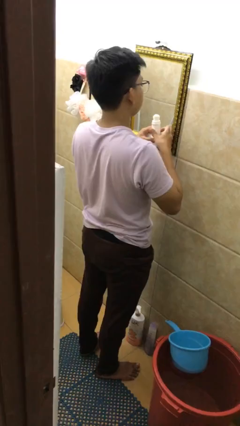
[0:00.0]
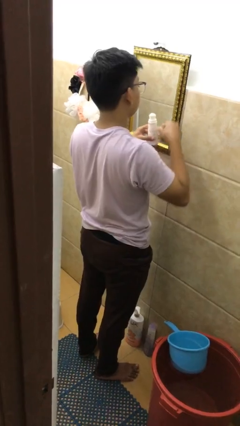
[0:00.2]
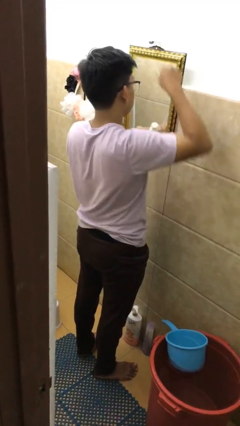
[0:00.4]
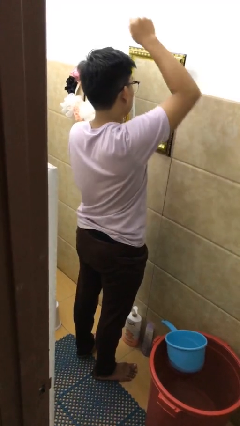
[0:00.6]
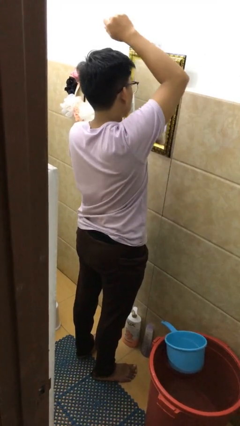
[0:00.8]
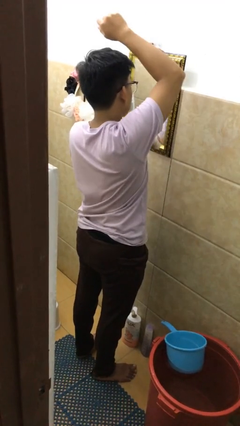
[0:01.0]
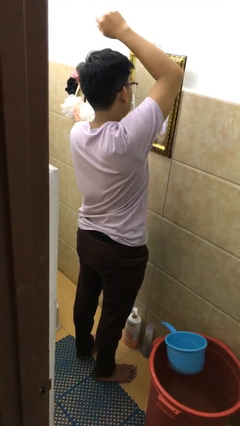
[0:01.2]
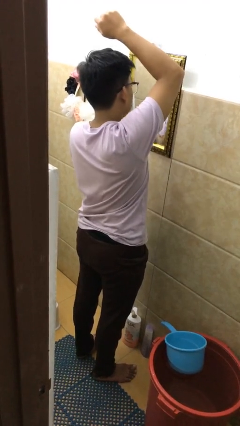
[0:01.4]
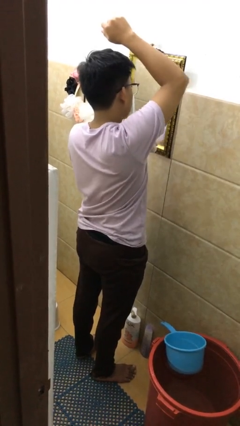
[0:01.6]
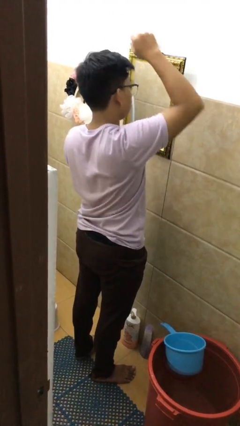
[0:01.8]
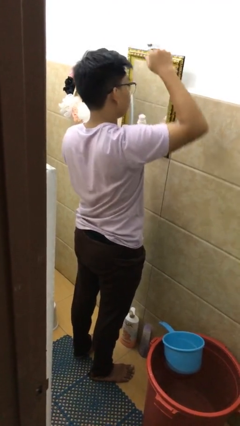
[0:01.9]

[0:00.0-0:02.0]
person applies deodorant

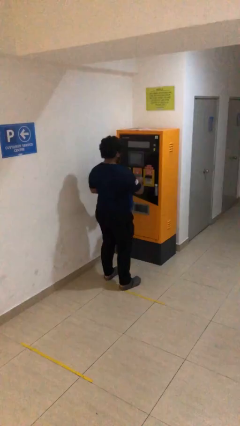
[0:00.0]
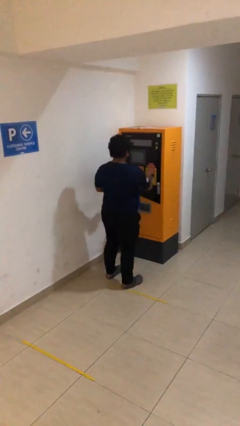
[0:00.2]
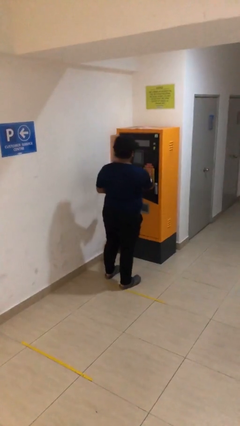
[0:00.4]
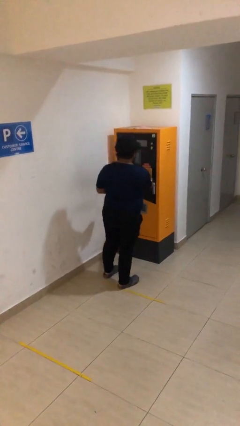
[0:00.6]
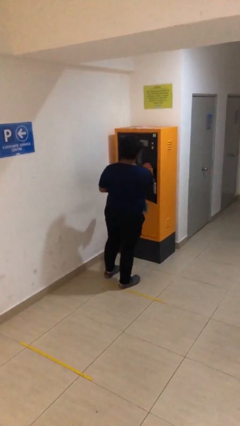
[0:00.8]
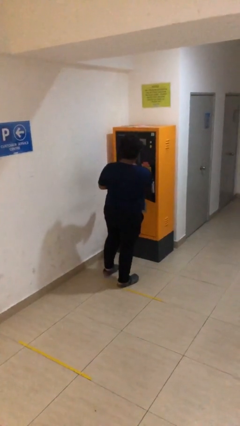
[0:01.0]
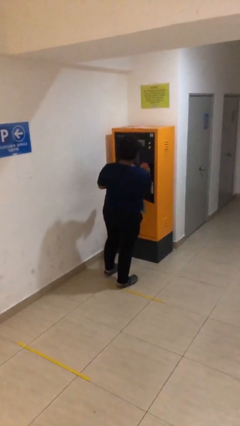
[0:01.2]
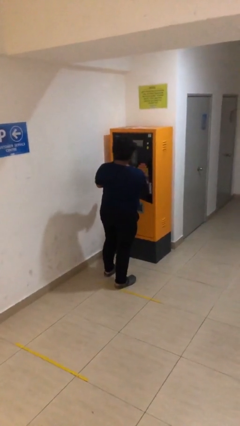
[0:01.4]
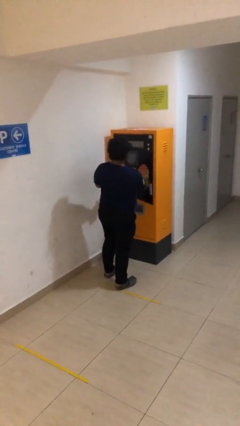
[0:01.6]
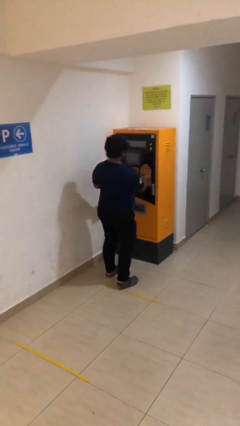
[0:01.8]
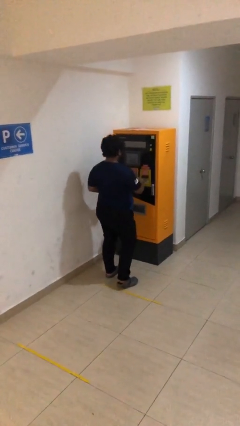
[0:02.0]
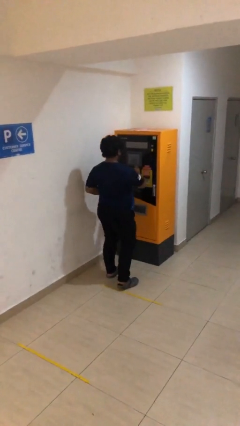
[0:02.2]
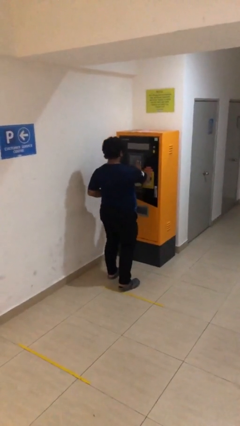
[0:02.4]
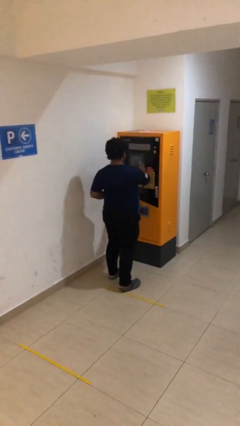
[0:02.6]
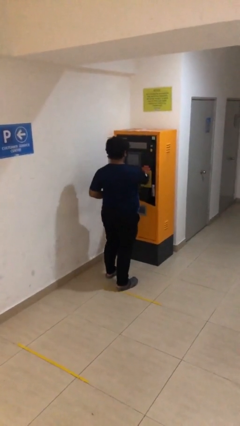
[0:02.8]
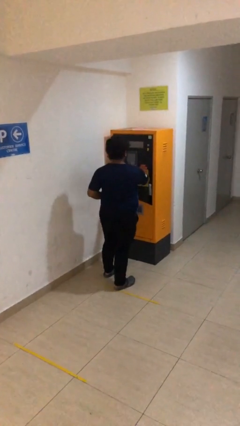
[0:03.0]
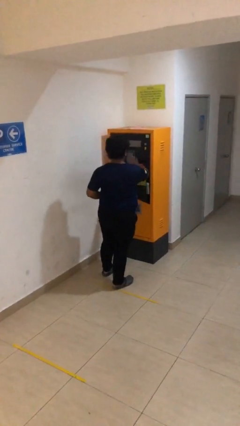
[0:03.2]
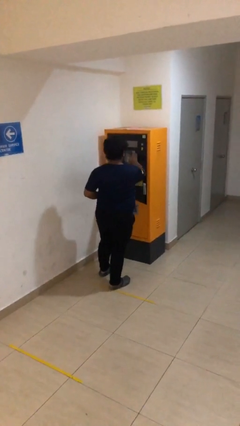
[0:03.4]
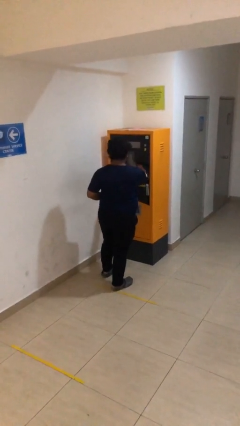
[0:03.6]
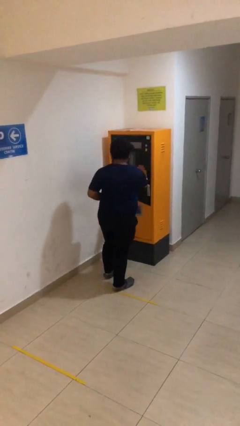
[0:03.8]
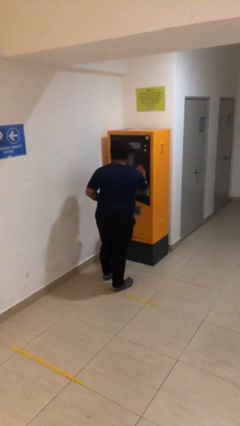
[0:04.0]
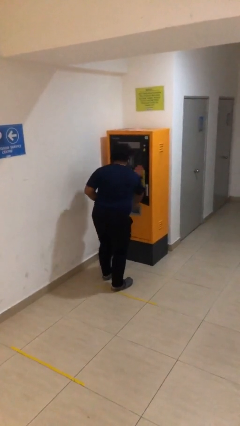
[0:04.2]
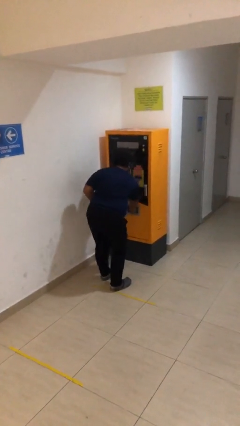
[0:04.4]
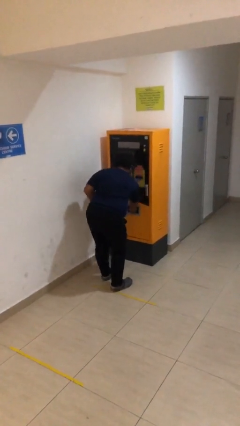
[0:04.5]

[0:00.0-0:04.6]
person purchases from machine

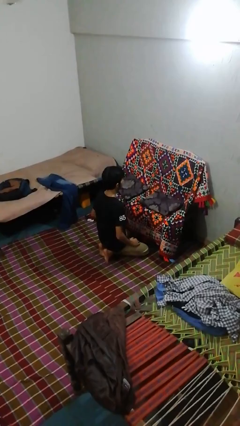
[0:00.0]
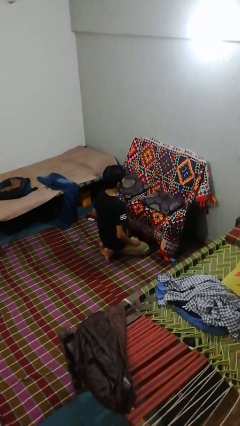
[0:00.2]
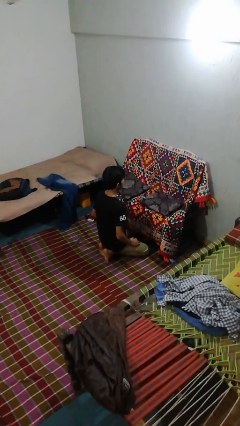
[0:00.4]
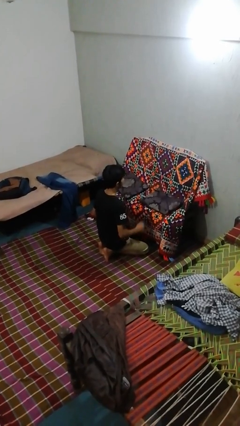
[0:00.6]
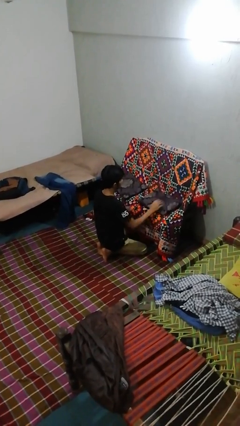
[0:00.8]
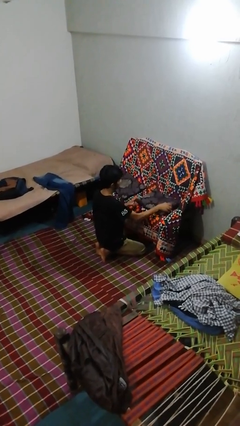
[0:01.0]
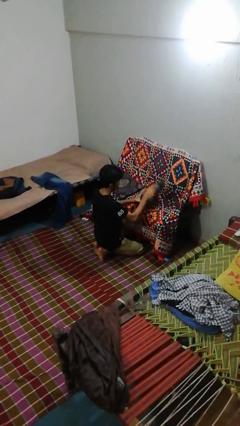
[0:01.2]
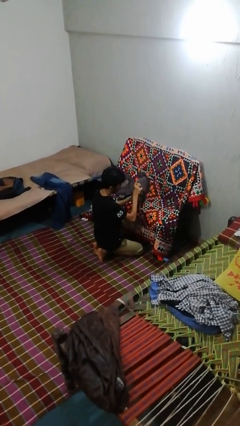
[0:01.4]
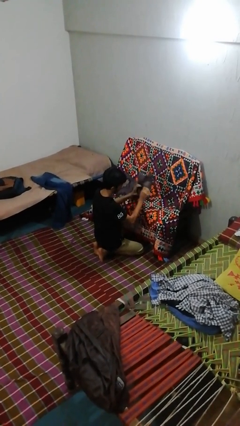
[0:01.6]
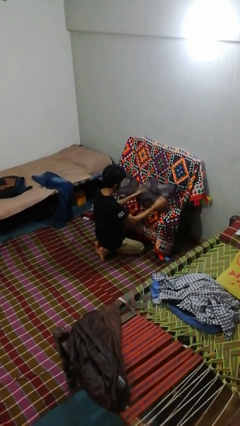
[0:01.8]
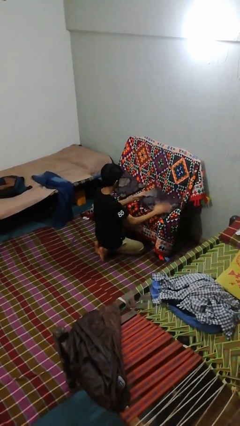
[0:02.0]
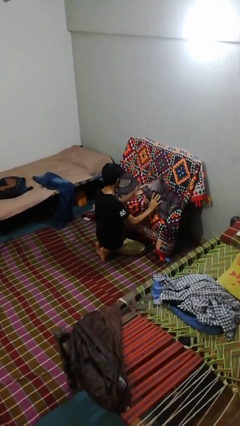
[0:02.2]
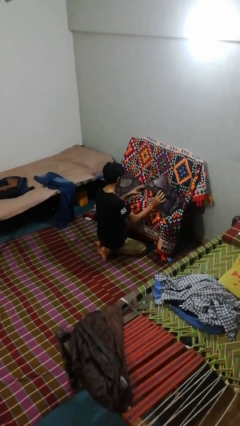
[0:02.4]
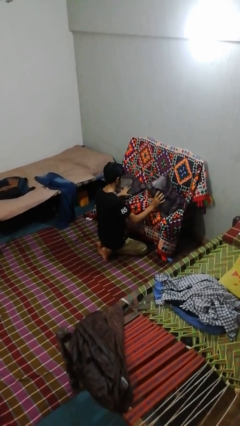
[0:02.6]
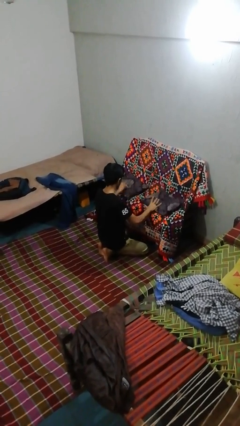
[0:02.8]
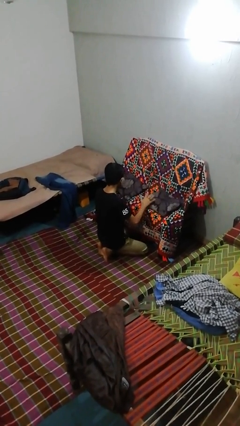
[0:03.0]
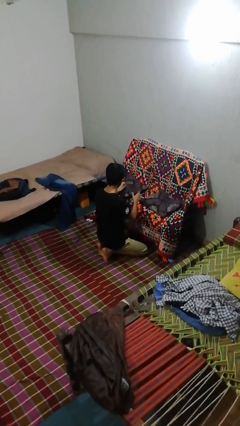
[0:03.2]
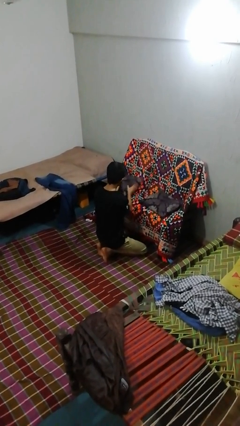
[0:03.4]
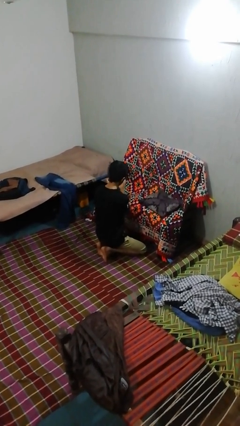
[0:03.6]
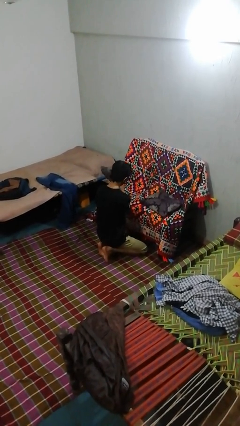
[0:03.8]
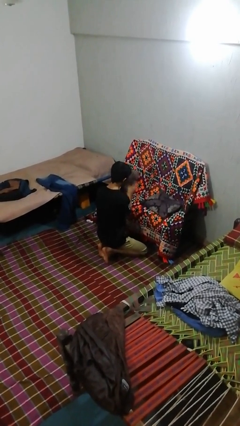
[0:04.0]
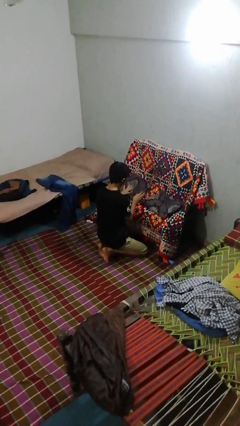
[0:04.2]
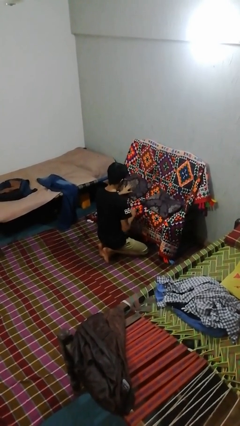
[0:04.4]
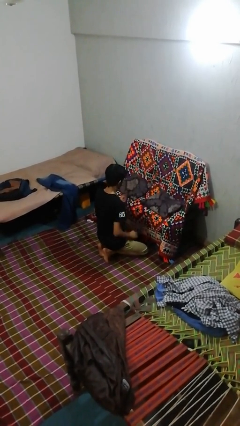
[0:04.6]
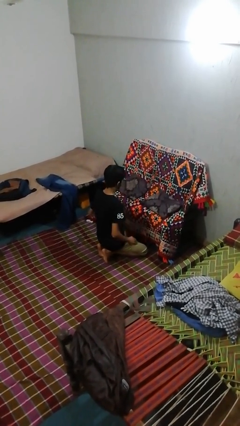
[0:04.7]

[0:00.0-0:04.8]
person searches in couch

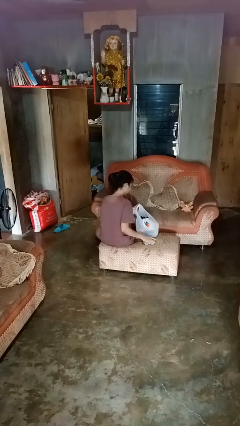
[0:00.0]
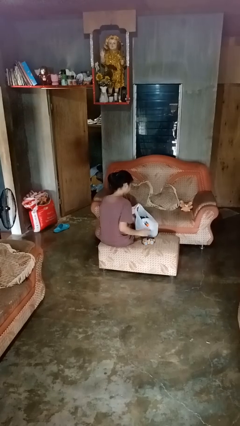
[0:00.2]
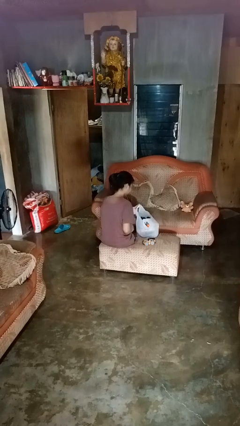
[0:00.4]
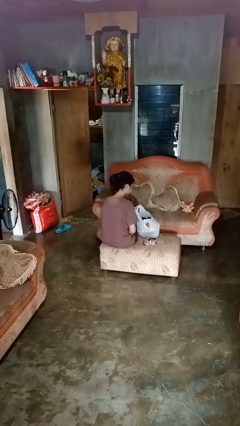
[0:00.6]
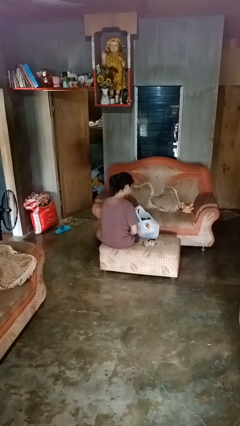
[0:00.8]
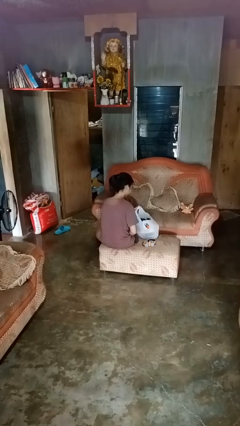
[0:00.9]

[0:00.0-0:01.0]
person takes object from bag

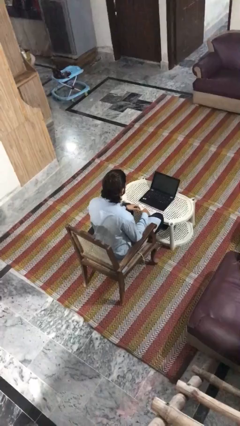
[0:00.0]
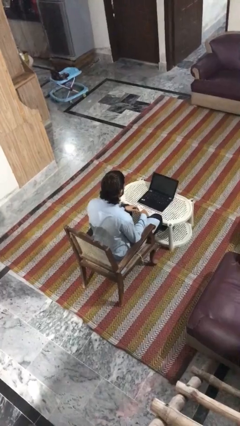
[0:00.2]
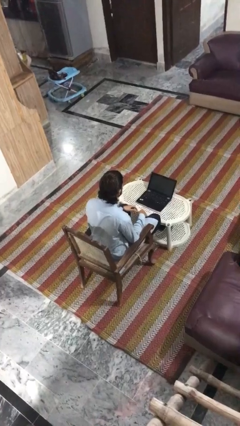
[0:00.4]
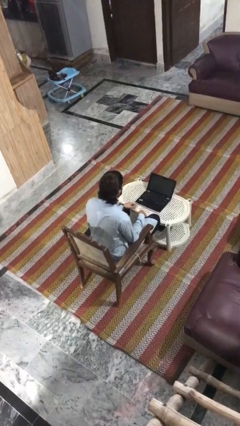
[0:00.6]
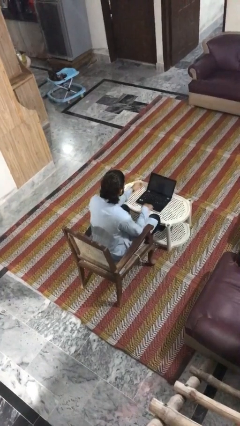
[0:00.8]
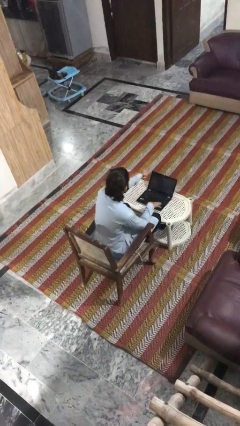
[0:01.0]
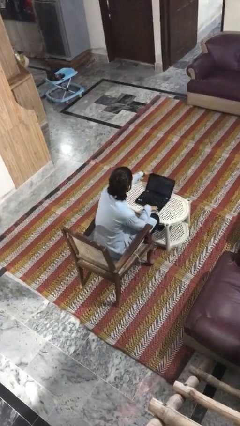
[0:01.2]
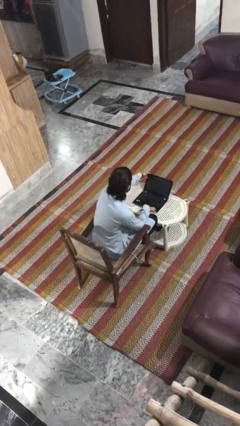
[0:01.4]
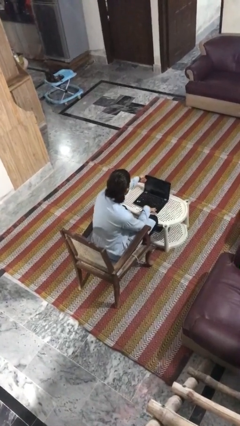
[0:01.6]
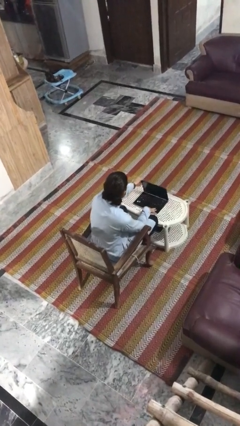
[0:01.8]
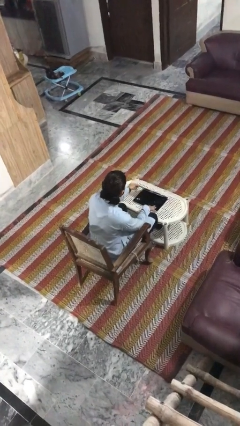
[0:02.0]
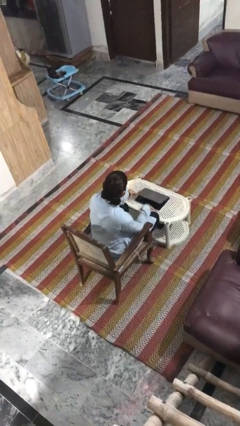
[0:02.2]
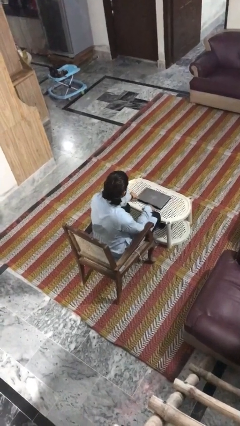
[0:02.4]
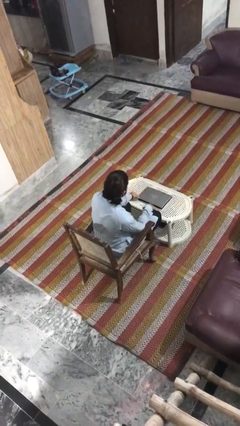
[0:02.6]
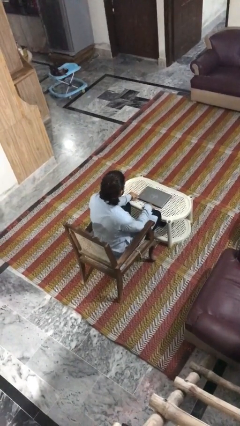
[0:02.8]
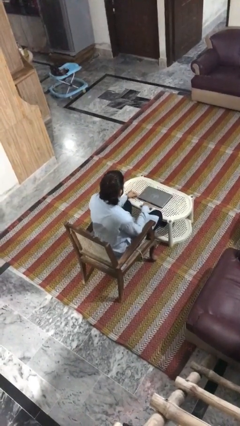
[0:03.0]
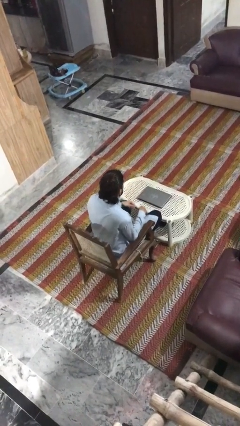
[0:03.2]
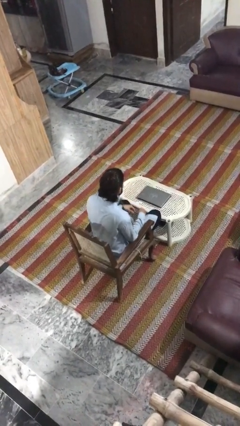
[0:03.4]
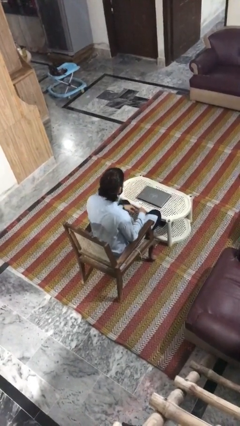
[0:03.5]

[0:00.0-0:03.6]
person closes laptop

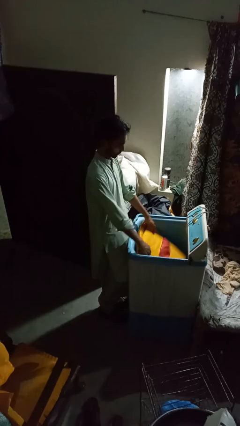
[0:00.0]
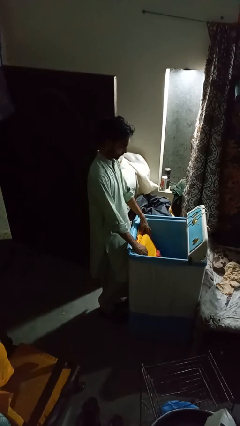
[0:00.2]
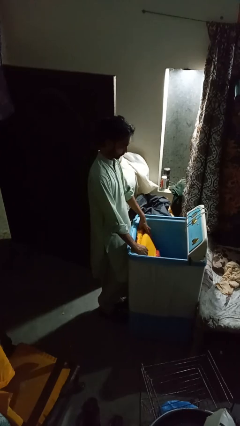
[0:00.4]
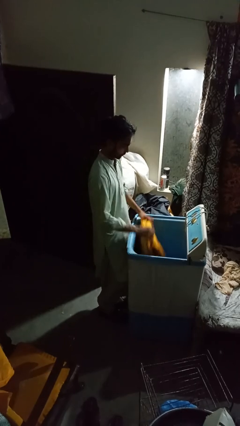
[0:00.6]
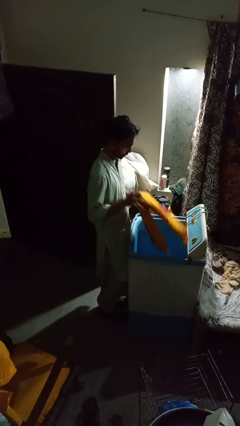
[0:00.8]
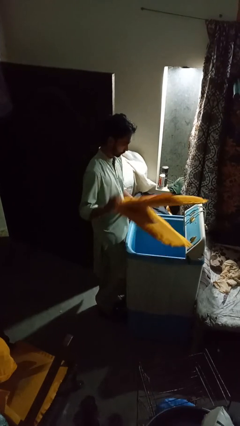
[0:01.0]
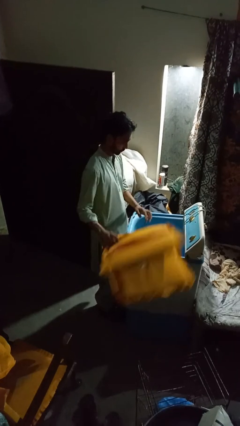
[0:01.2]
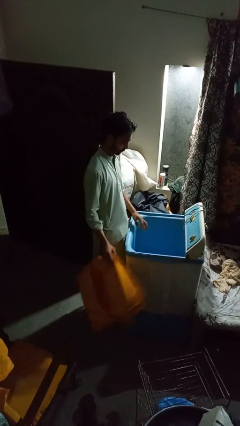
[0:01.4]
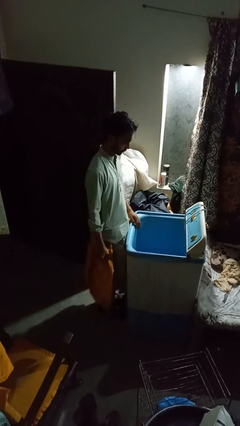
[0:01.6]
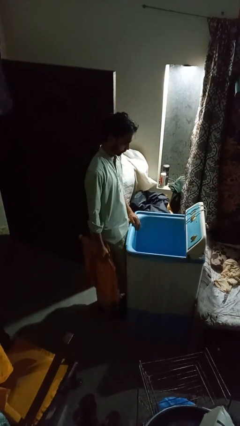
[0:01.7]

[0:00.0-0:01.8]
person unloads clotheswasher
